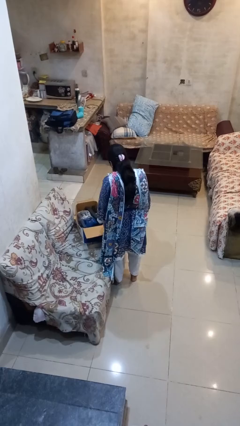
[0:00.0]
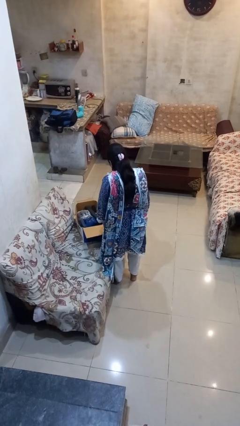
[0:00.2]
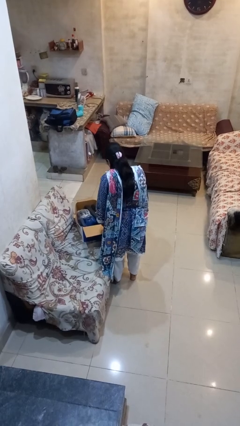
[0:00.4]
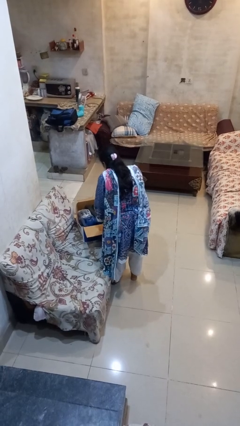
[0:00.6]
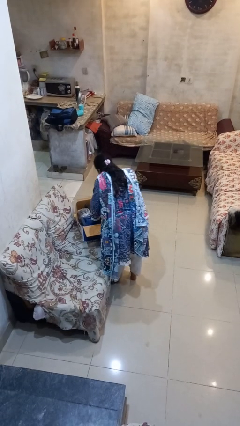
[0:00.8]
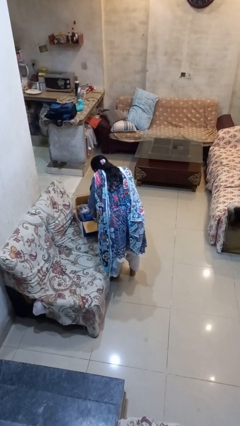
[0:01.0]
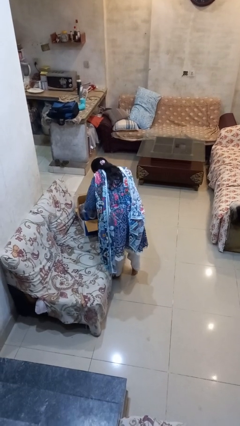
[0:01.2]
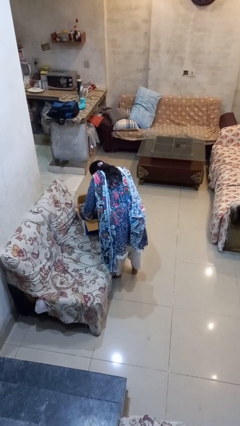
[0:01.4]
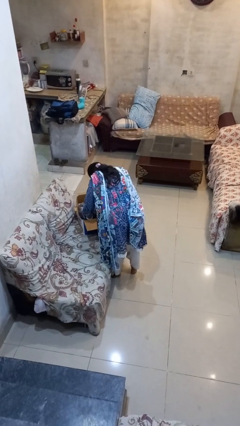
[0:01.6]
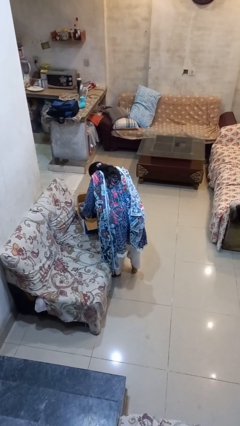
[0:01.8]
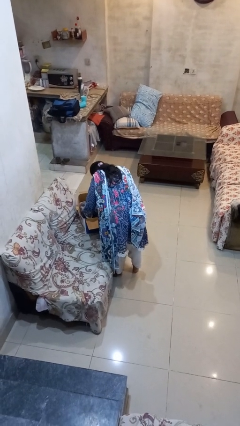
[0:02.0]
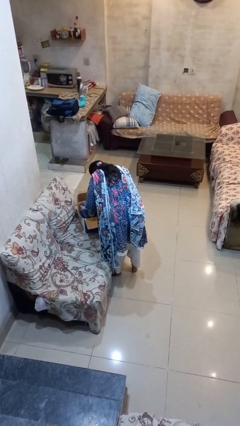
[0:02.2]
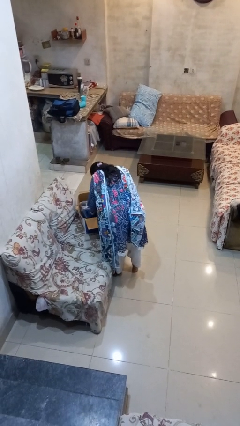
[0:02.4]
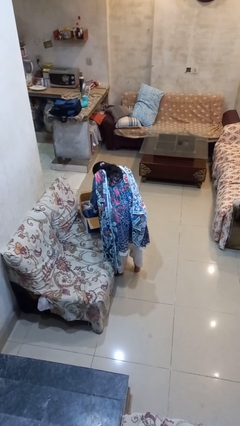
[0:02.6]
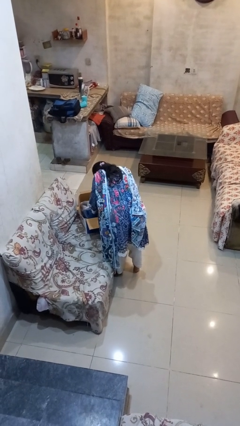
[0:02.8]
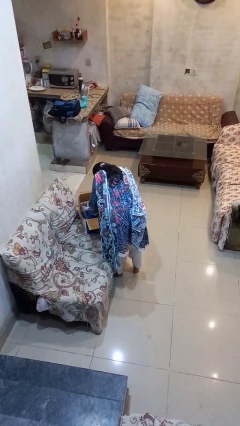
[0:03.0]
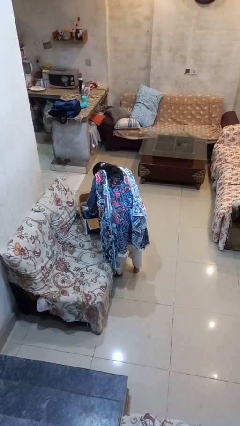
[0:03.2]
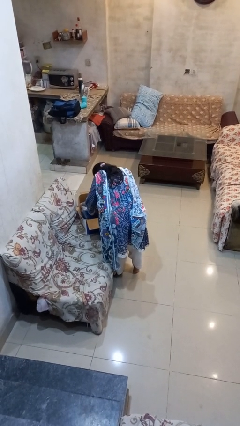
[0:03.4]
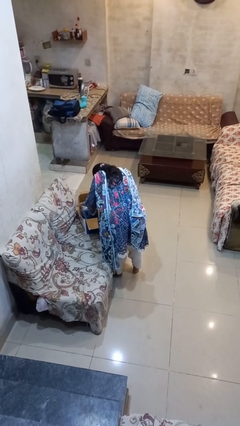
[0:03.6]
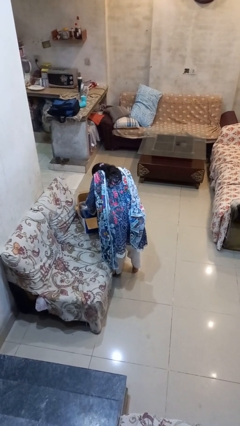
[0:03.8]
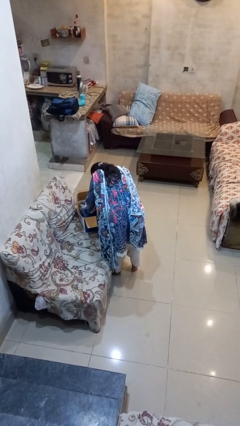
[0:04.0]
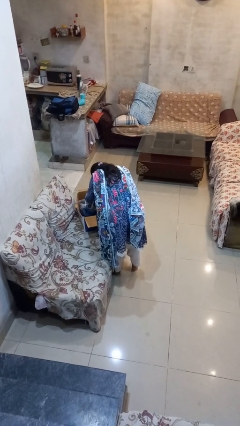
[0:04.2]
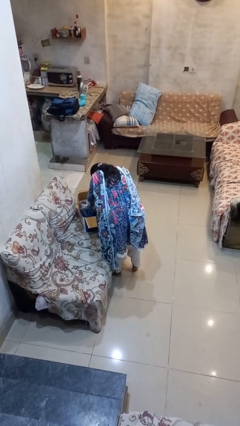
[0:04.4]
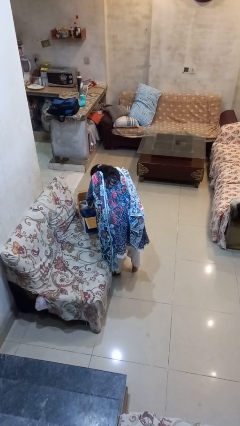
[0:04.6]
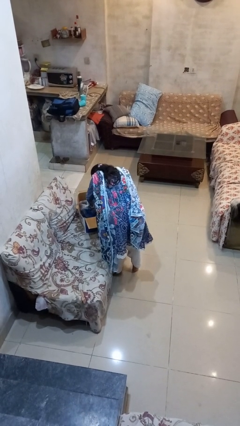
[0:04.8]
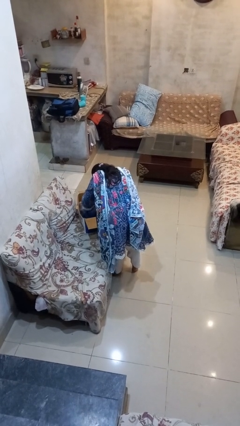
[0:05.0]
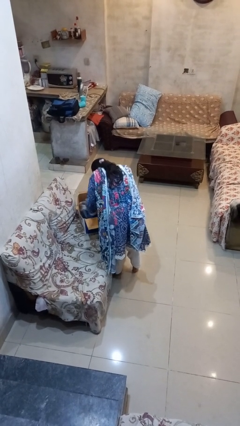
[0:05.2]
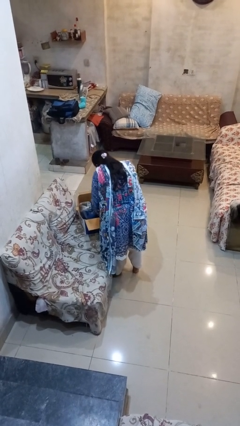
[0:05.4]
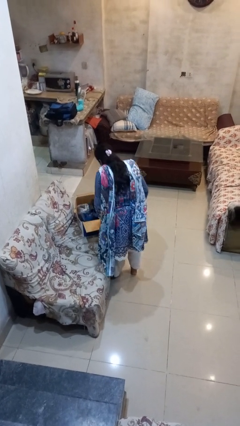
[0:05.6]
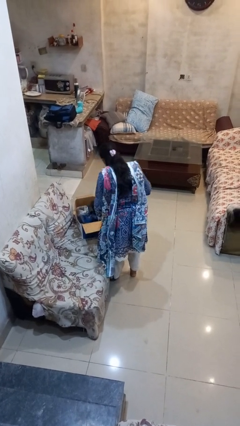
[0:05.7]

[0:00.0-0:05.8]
person searches in box

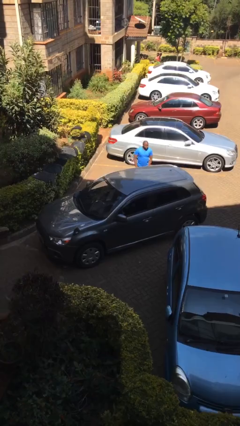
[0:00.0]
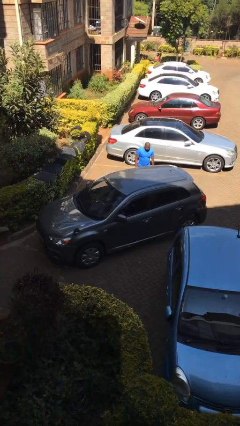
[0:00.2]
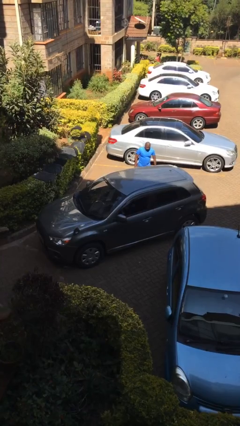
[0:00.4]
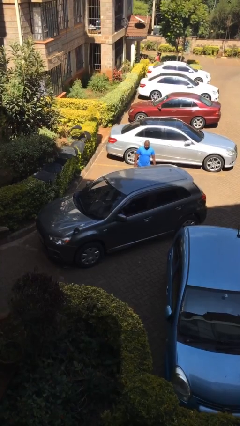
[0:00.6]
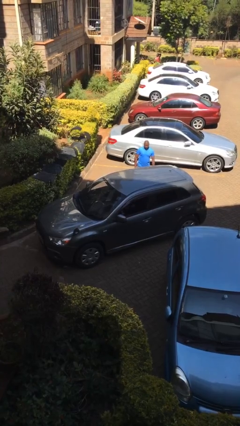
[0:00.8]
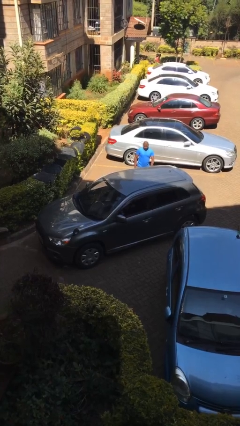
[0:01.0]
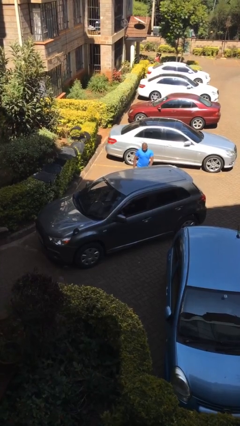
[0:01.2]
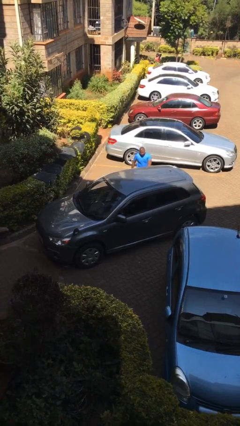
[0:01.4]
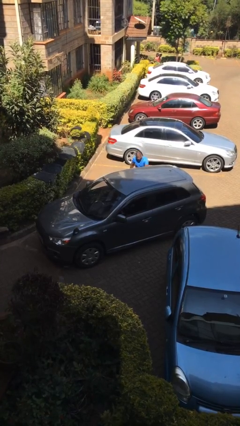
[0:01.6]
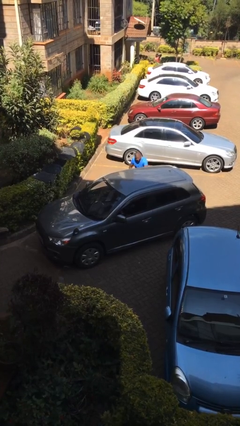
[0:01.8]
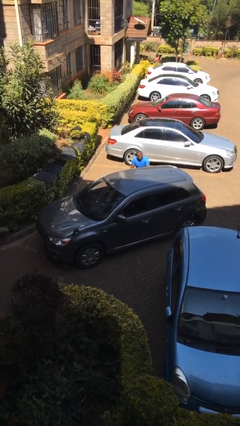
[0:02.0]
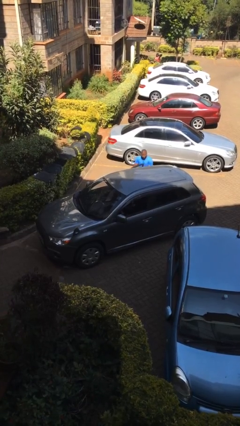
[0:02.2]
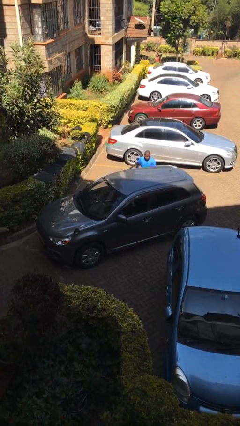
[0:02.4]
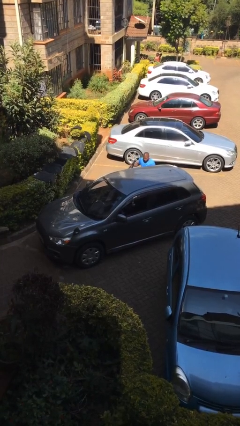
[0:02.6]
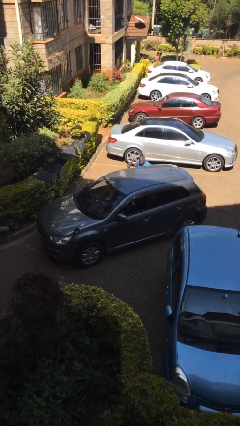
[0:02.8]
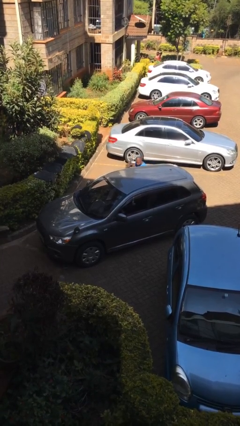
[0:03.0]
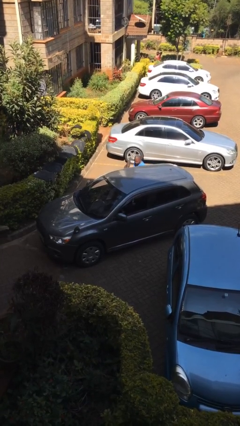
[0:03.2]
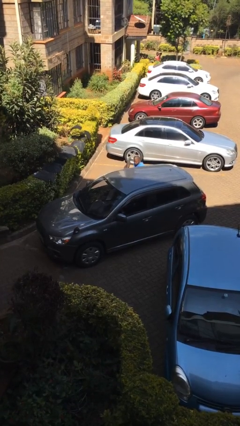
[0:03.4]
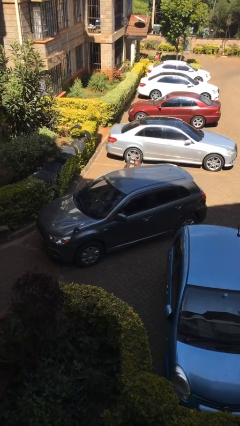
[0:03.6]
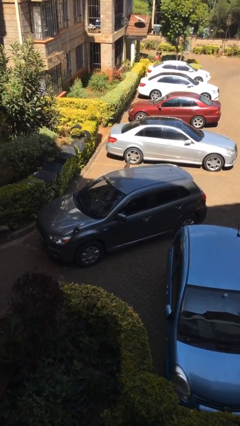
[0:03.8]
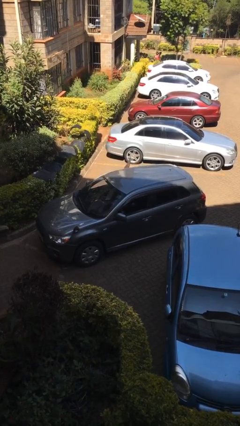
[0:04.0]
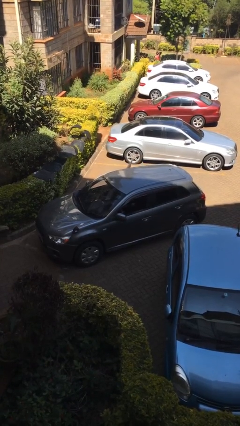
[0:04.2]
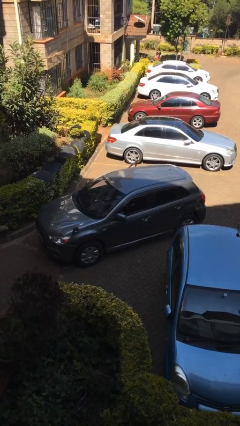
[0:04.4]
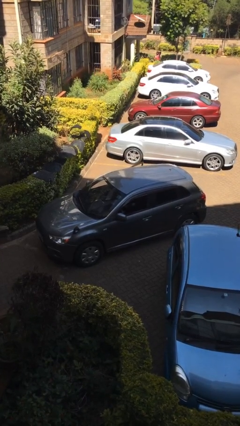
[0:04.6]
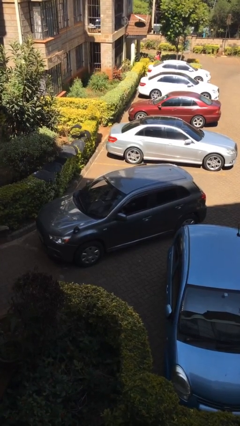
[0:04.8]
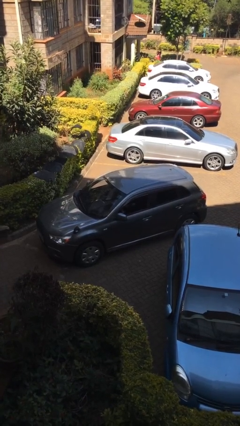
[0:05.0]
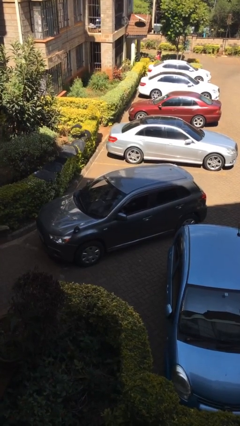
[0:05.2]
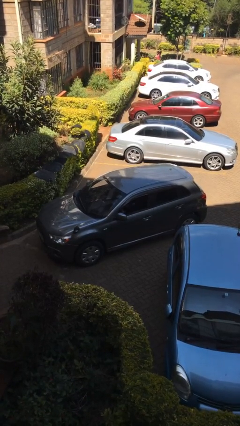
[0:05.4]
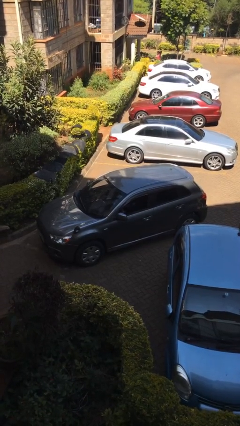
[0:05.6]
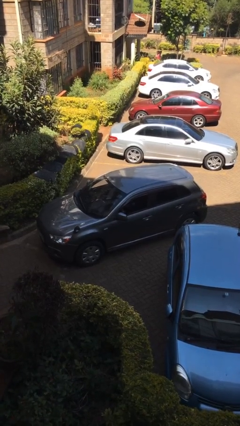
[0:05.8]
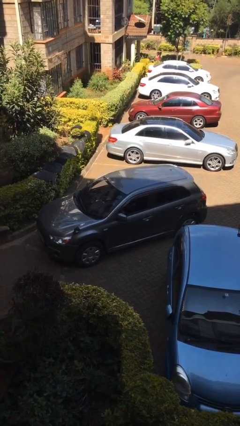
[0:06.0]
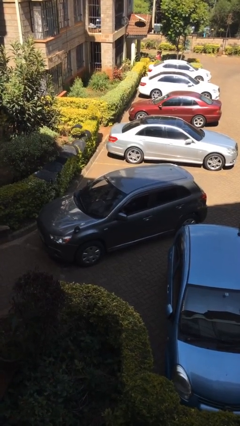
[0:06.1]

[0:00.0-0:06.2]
car picks up person

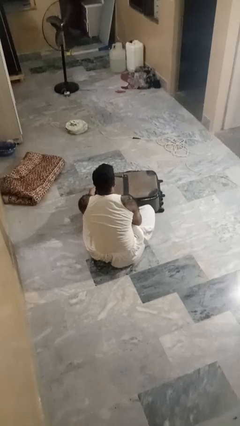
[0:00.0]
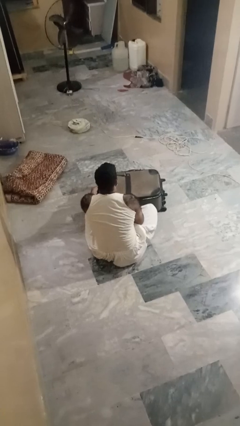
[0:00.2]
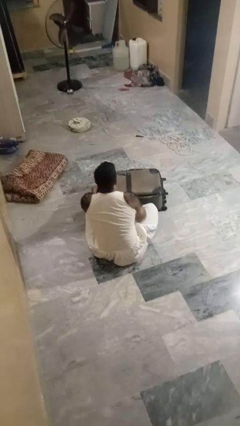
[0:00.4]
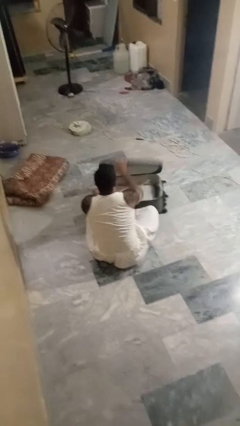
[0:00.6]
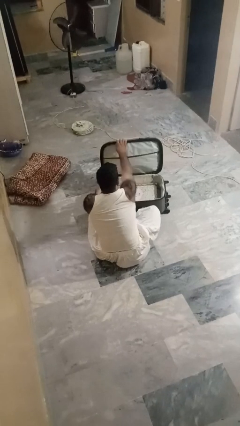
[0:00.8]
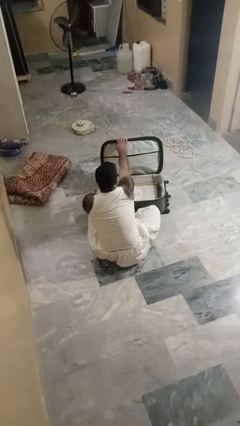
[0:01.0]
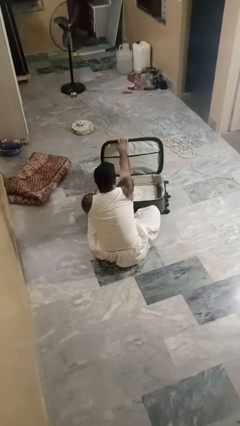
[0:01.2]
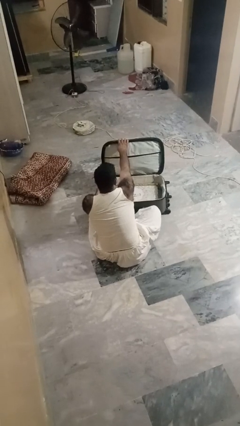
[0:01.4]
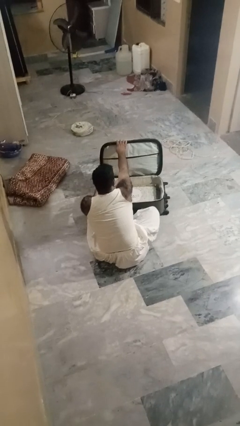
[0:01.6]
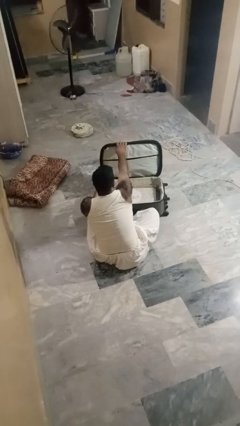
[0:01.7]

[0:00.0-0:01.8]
person opens suitcase

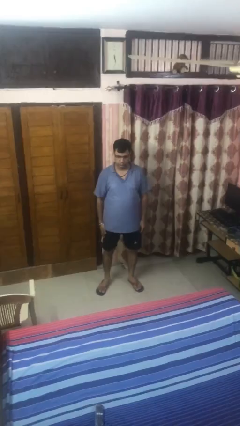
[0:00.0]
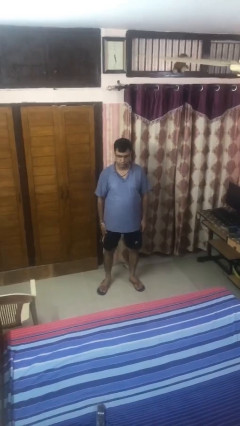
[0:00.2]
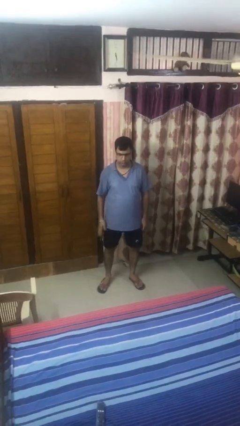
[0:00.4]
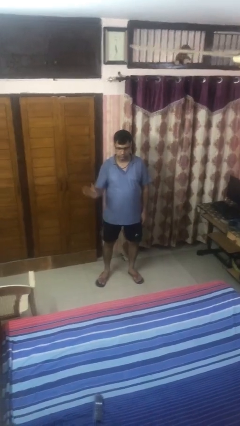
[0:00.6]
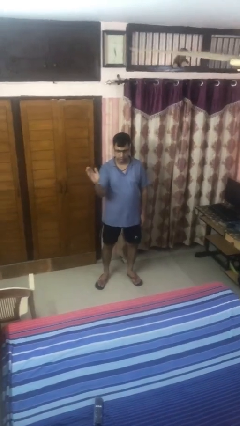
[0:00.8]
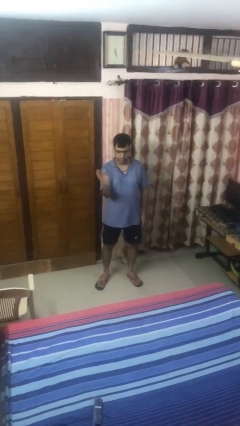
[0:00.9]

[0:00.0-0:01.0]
person gestures swipe left

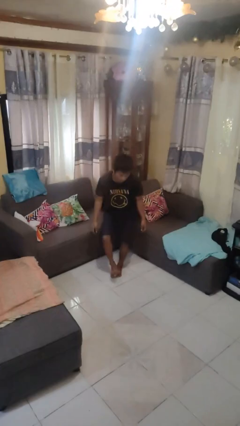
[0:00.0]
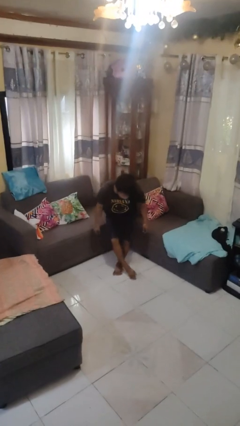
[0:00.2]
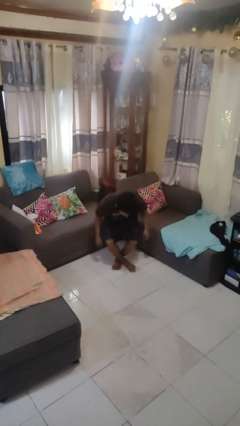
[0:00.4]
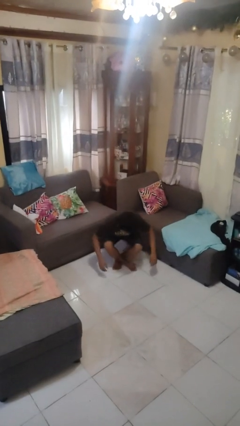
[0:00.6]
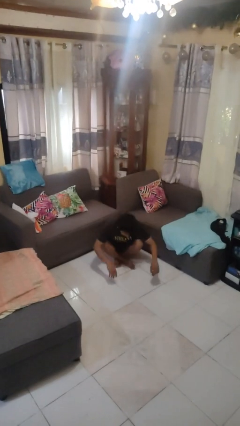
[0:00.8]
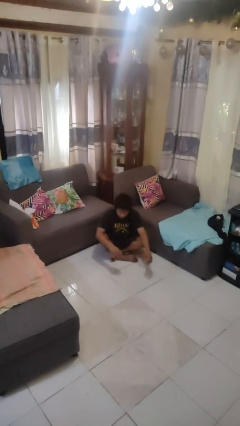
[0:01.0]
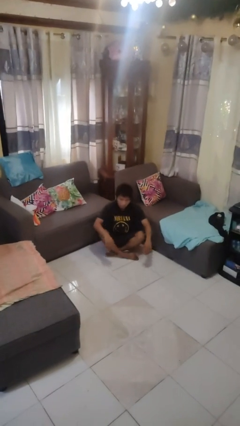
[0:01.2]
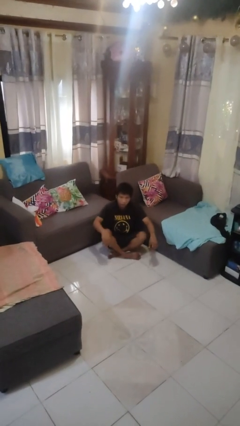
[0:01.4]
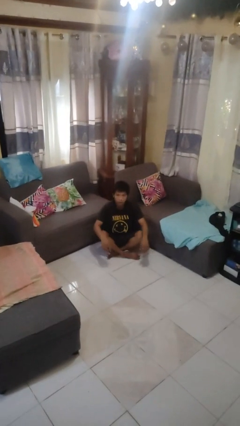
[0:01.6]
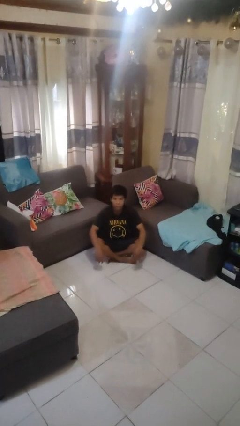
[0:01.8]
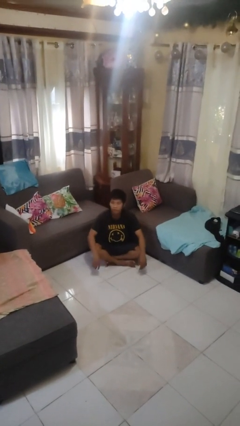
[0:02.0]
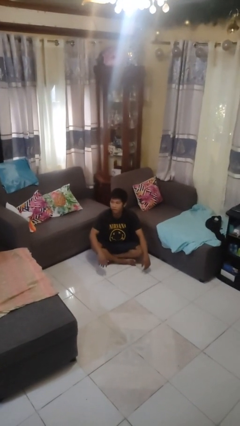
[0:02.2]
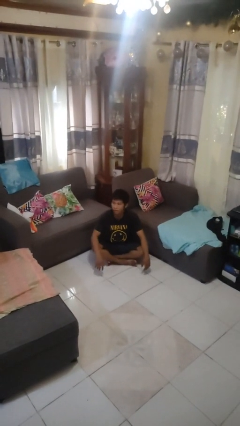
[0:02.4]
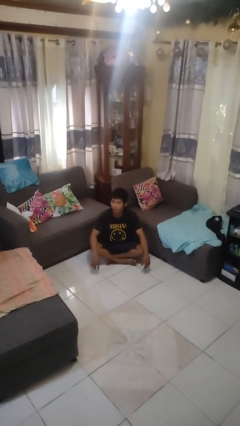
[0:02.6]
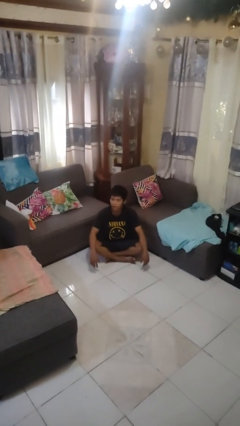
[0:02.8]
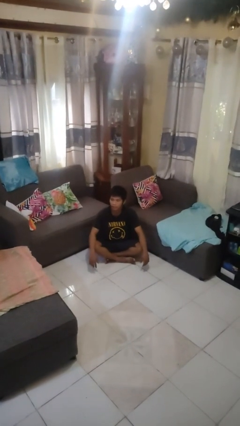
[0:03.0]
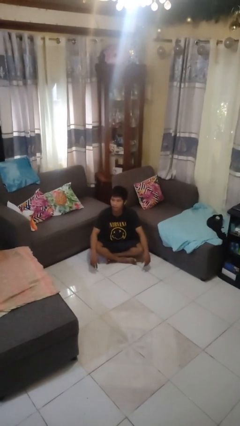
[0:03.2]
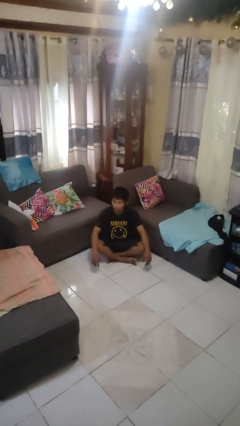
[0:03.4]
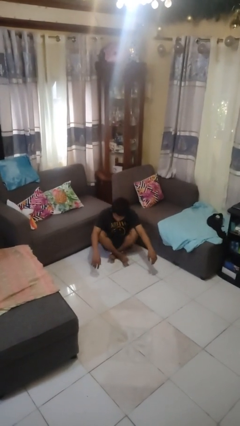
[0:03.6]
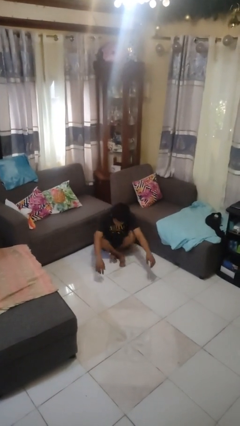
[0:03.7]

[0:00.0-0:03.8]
person sits crisscross
